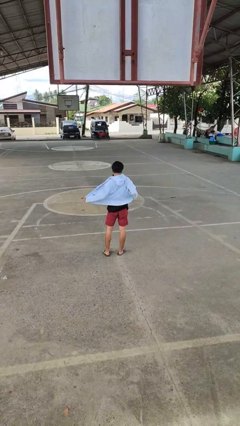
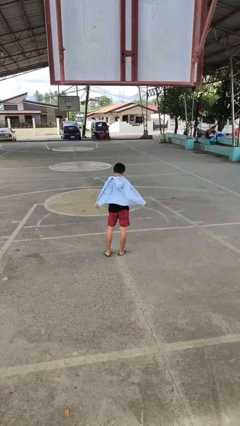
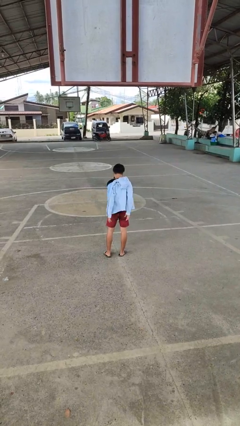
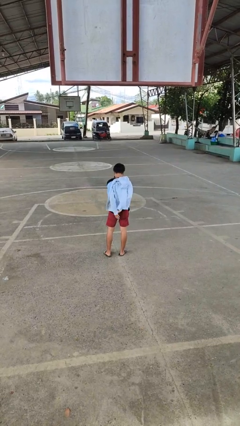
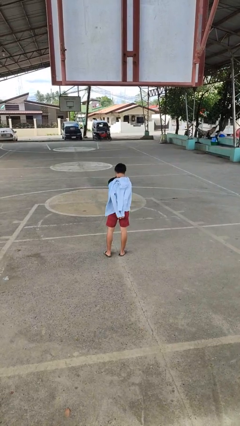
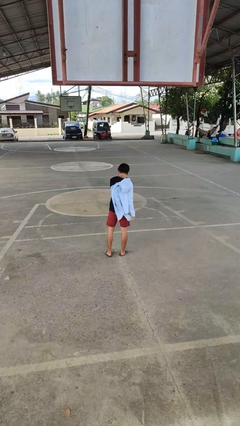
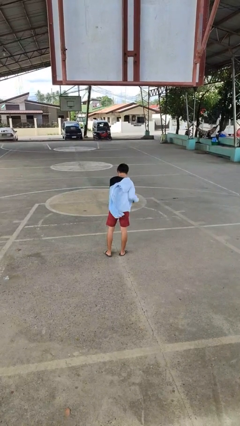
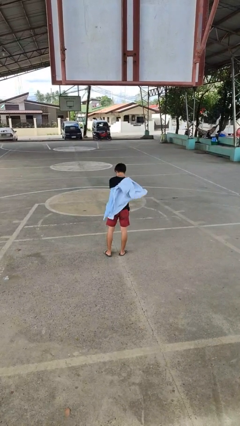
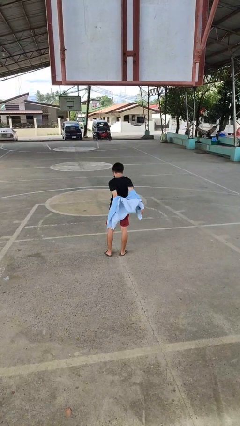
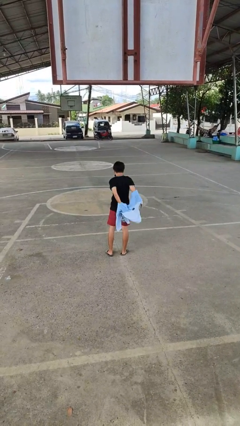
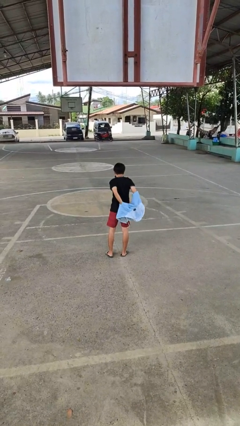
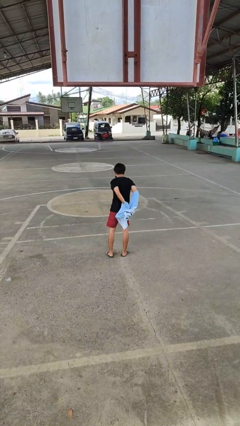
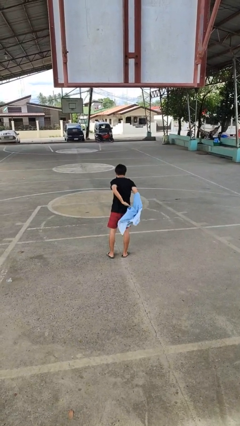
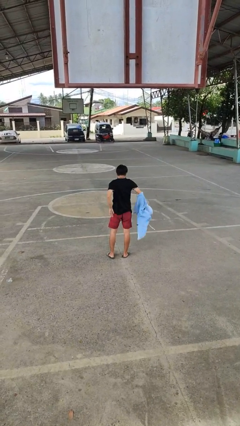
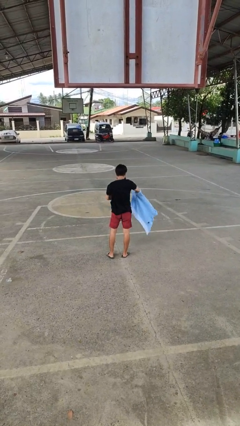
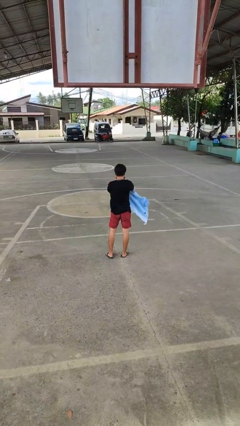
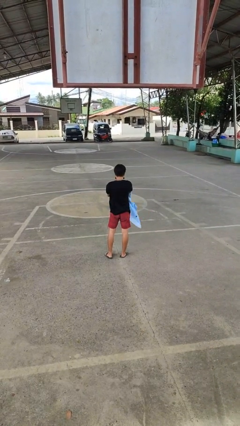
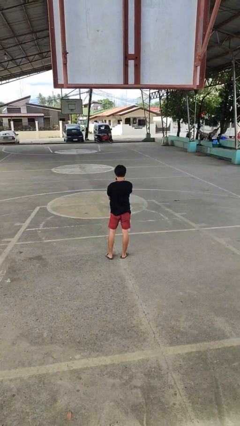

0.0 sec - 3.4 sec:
person takes off jacket

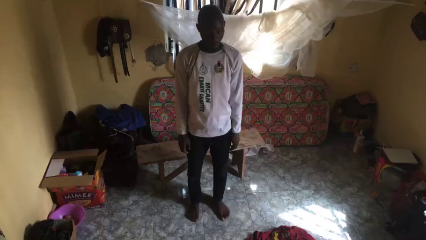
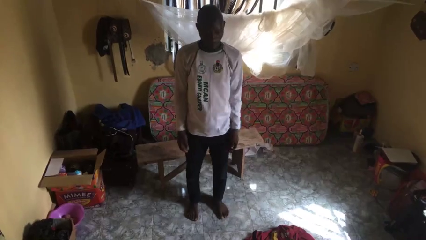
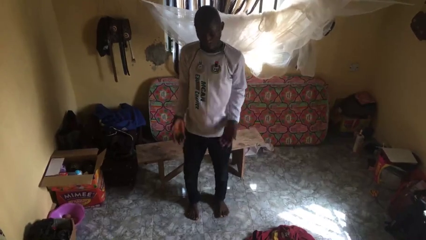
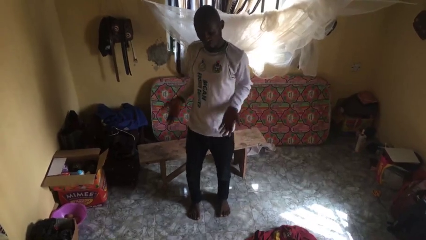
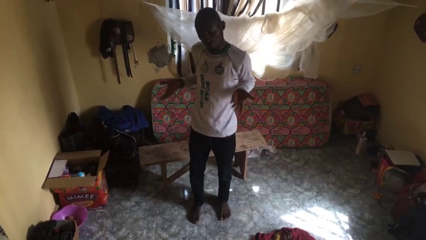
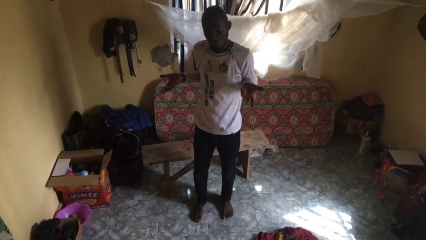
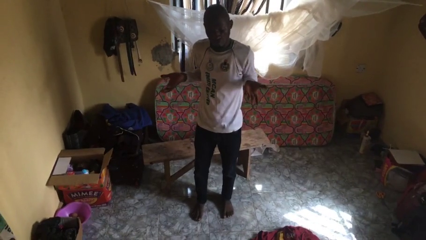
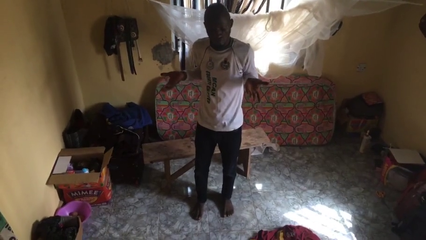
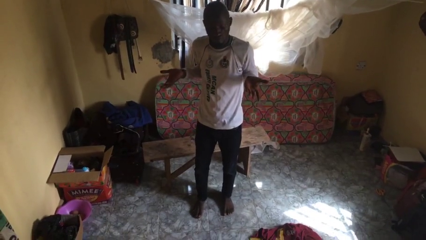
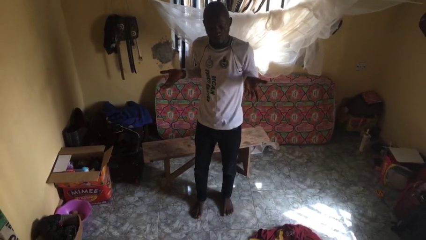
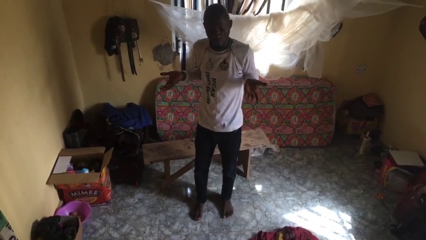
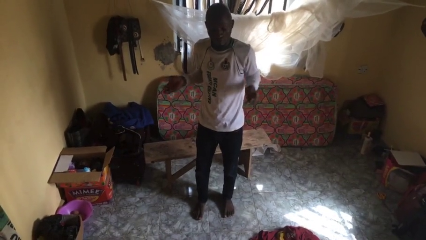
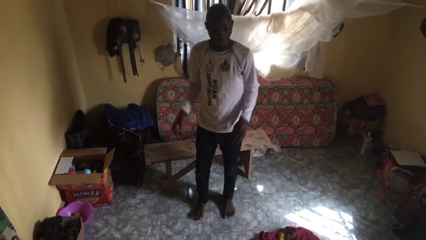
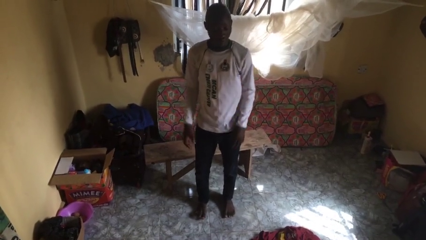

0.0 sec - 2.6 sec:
person shrugs

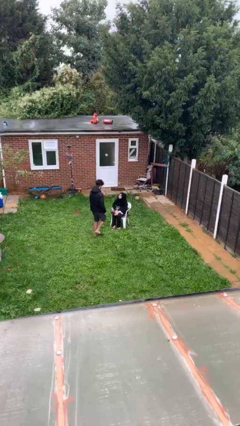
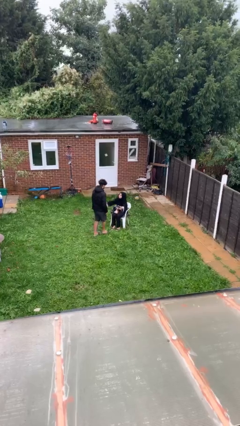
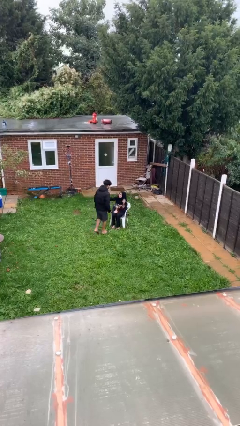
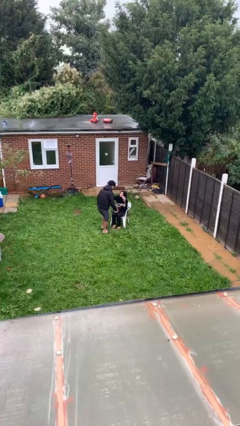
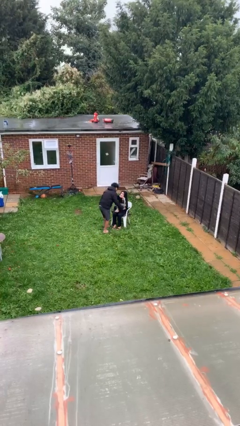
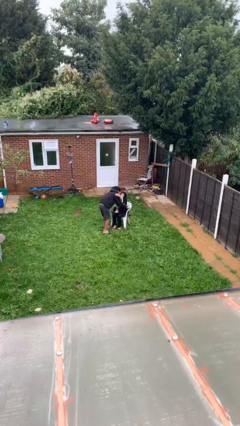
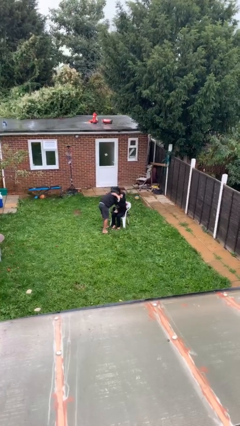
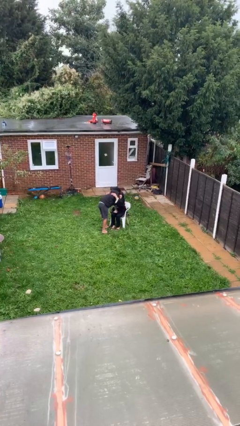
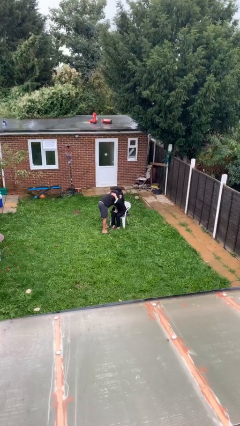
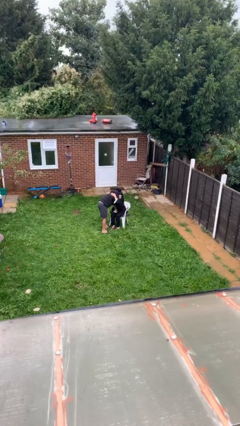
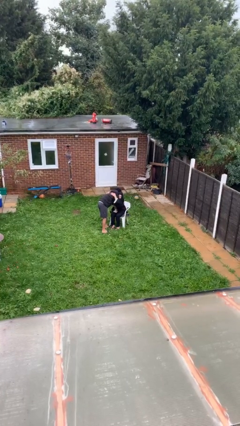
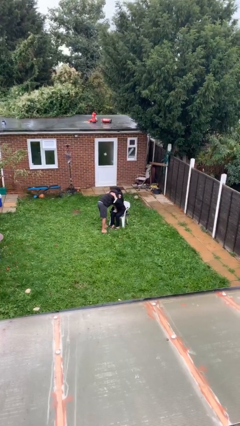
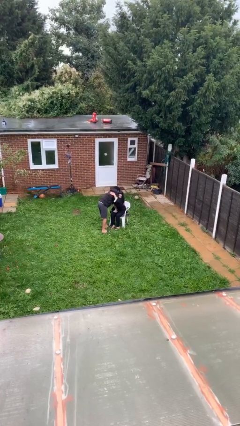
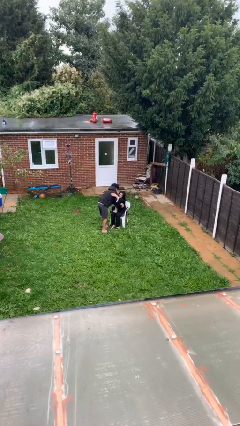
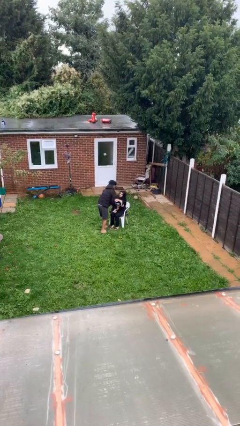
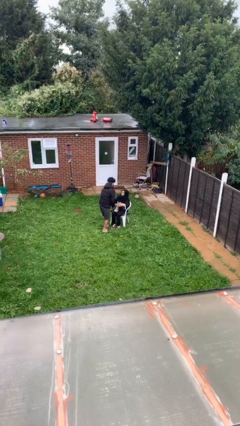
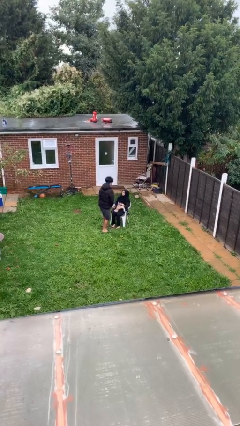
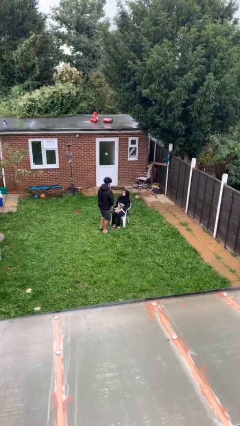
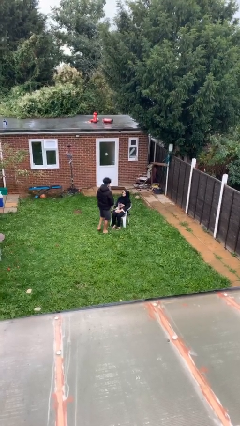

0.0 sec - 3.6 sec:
person embraces person

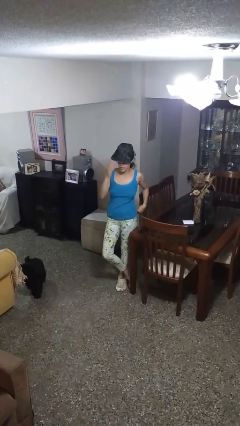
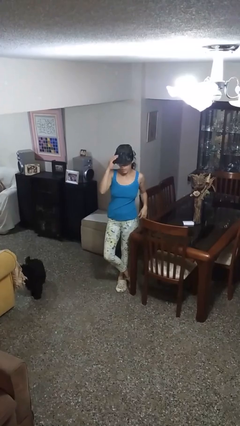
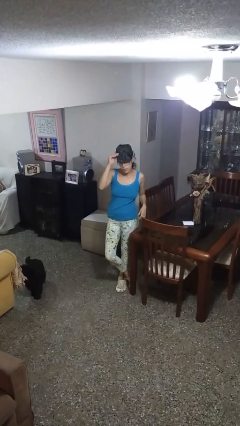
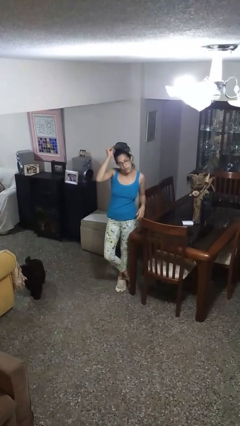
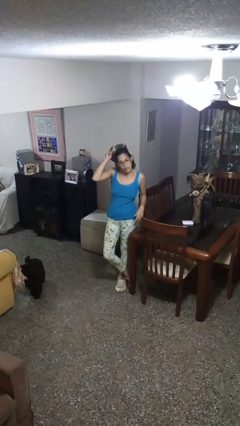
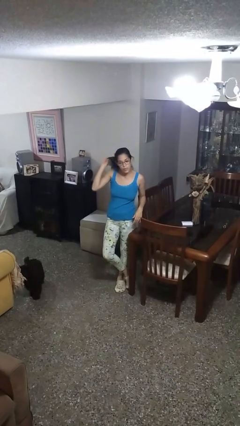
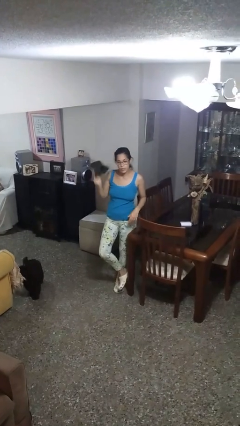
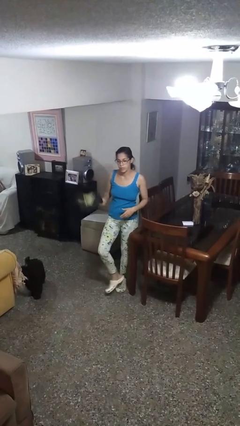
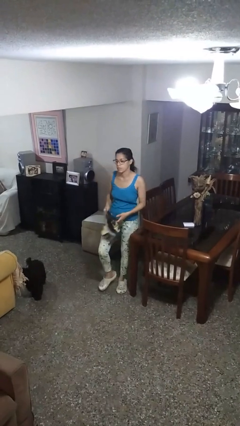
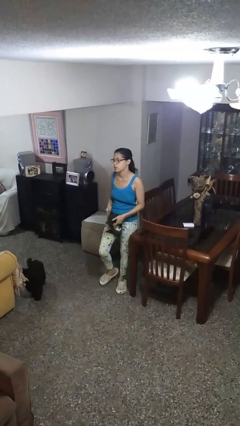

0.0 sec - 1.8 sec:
person takes off hat

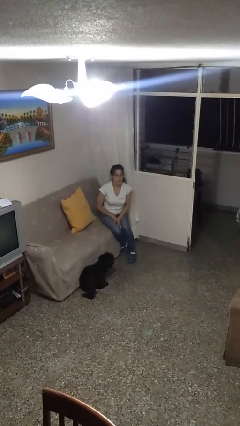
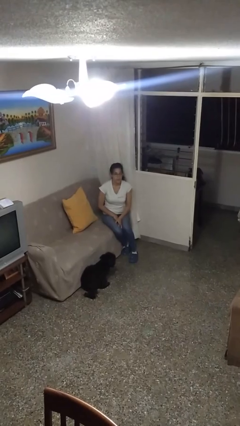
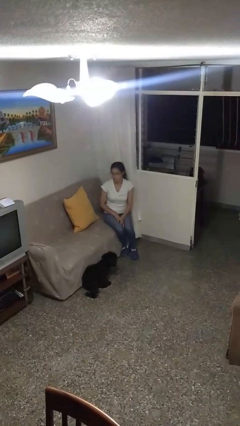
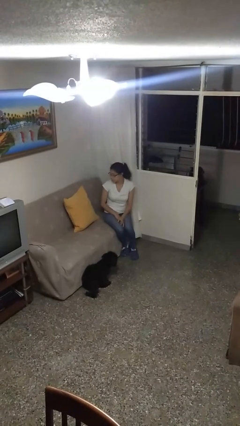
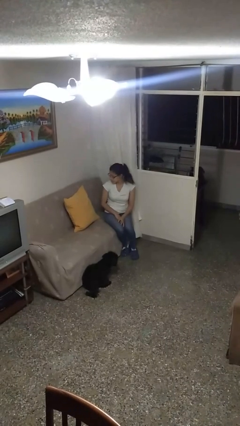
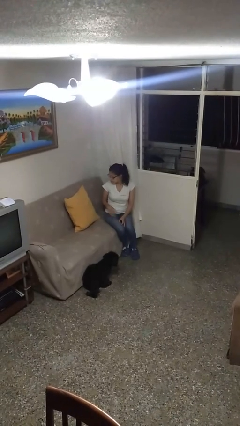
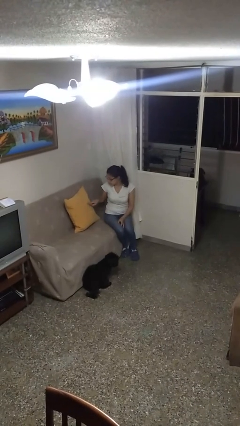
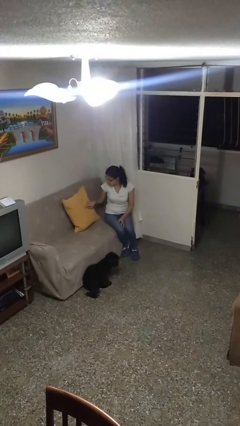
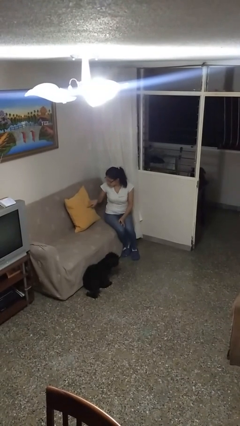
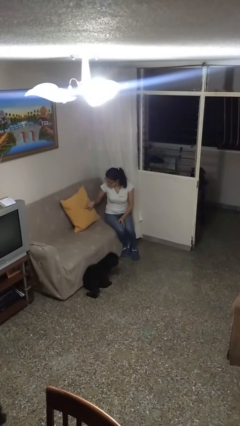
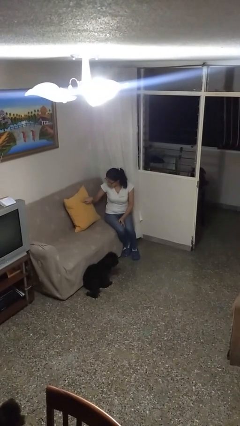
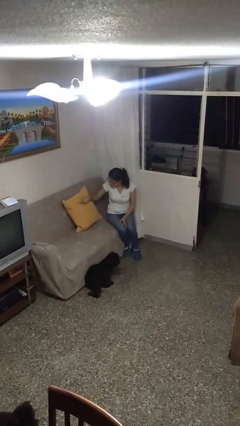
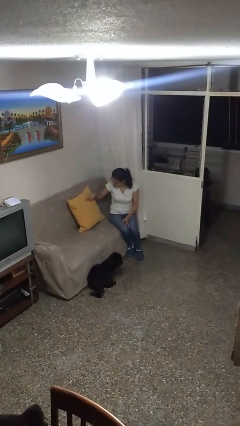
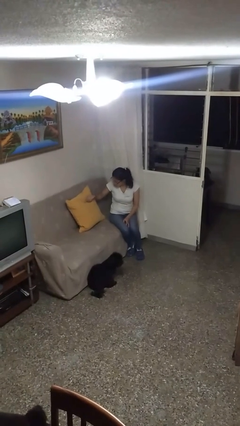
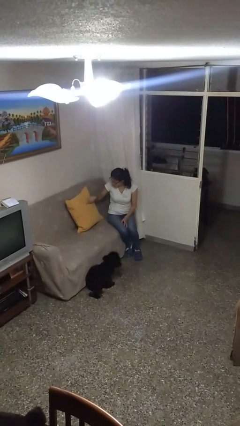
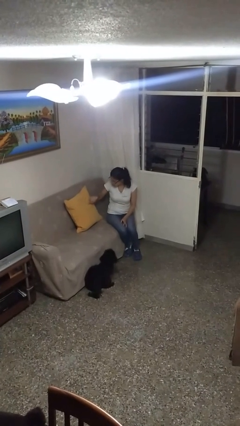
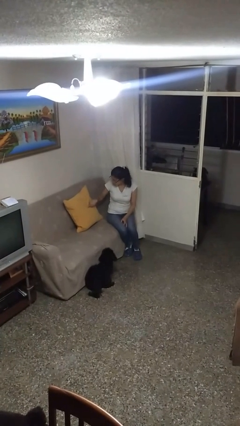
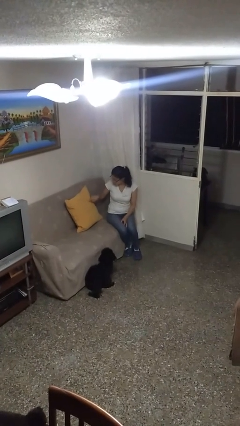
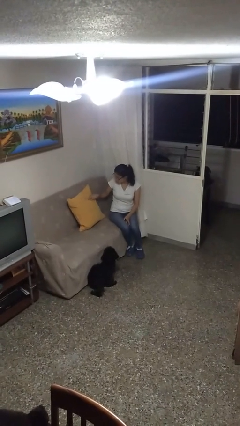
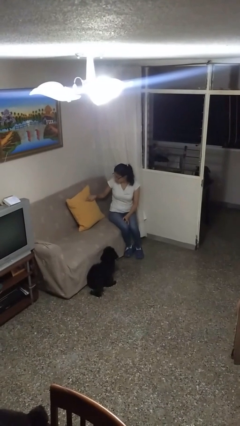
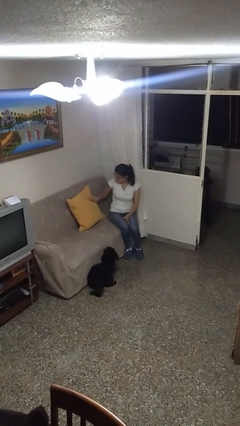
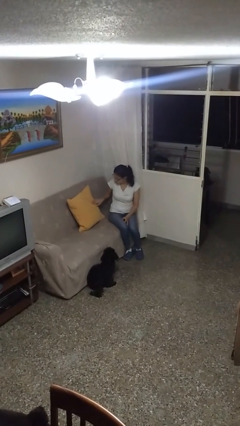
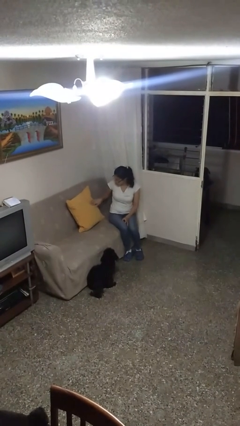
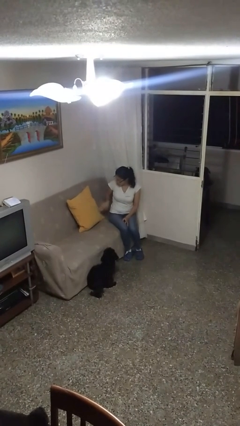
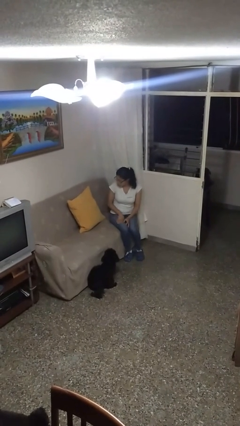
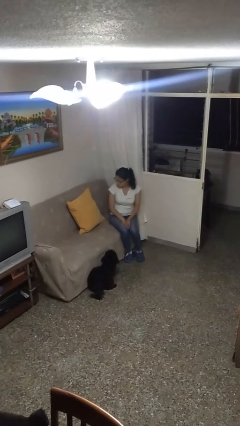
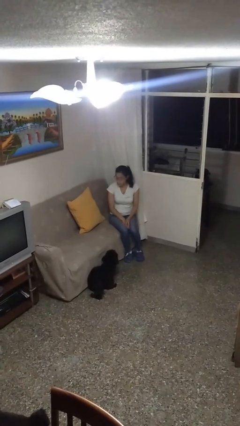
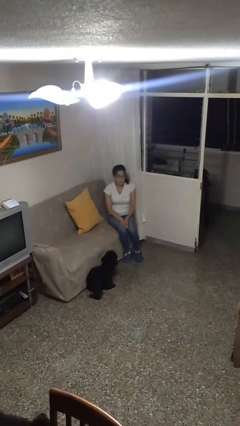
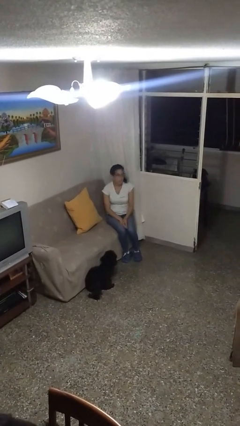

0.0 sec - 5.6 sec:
person taps object with finger

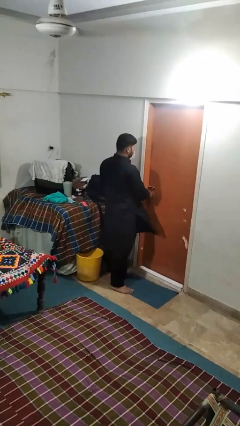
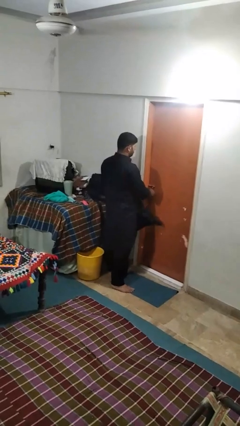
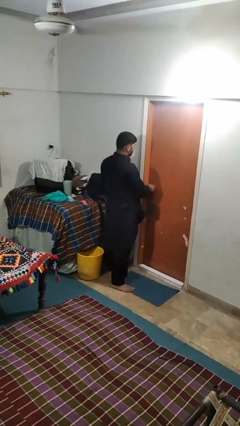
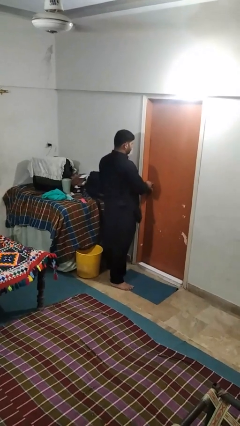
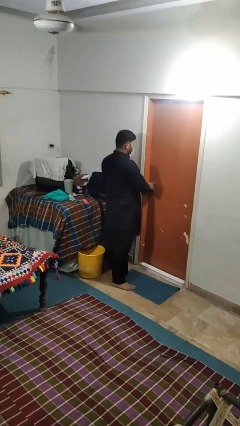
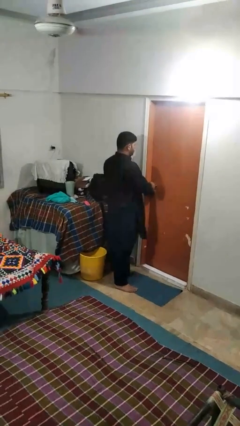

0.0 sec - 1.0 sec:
person locks door with keys
